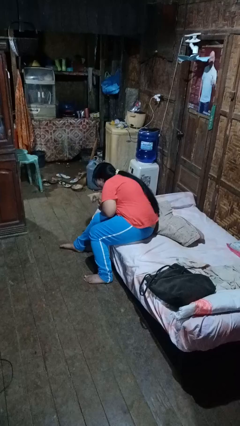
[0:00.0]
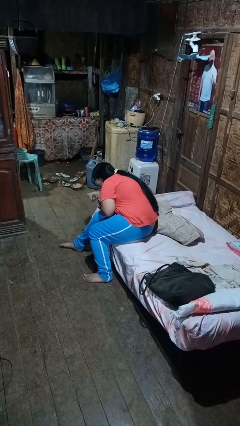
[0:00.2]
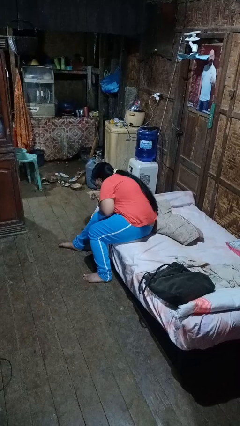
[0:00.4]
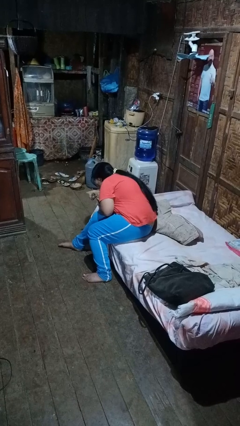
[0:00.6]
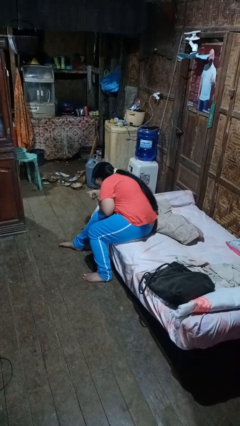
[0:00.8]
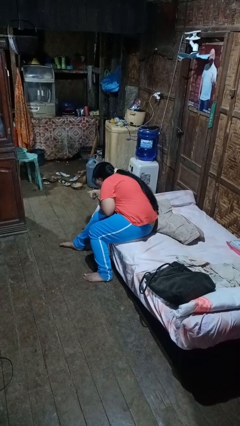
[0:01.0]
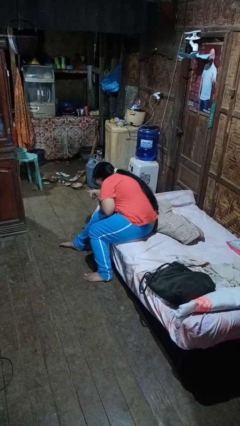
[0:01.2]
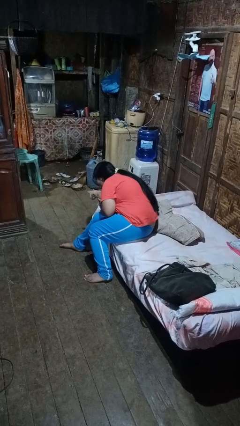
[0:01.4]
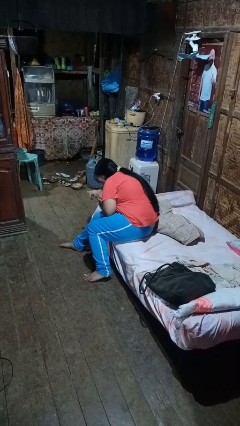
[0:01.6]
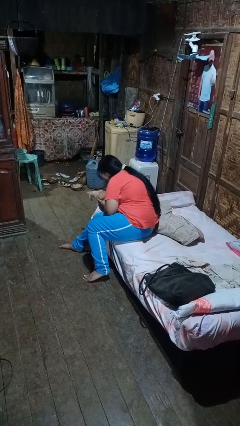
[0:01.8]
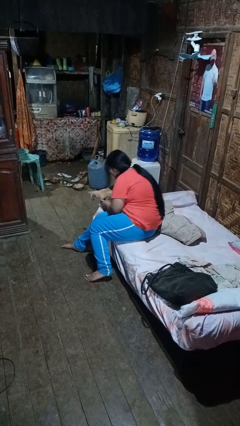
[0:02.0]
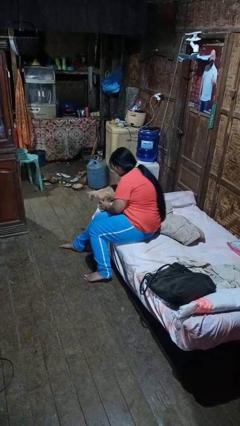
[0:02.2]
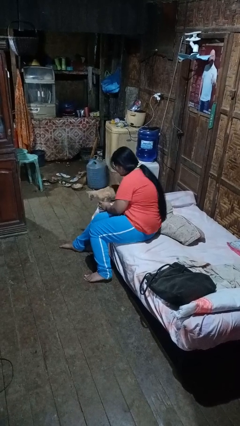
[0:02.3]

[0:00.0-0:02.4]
person hugs cat

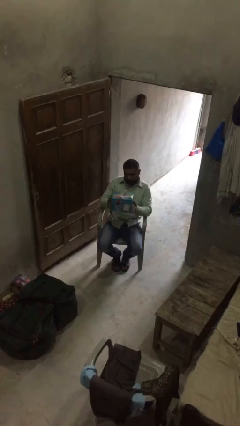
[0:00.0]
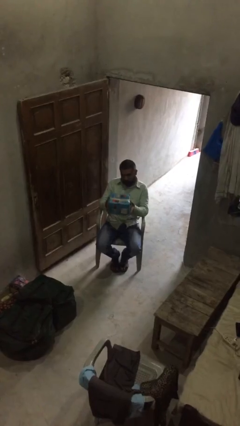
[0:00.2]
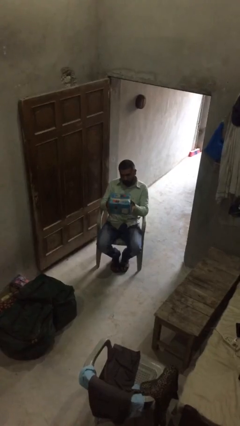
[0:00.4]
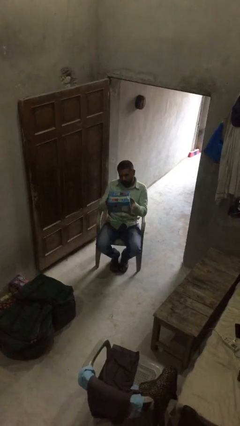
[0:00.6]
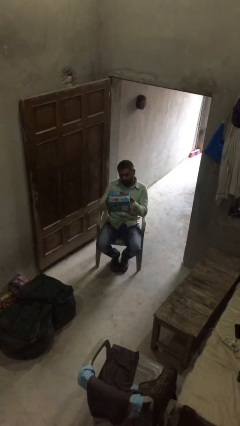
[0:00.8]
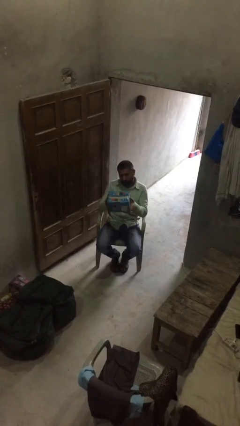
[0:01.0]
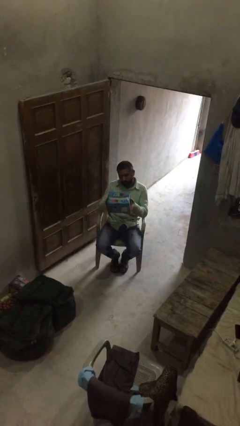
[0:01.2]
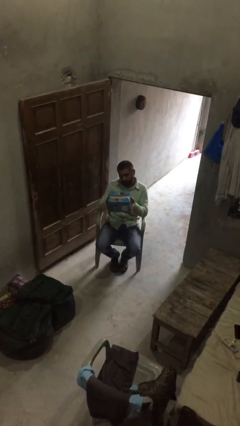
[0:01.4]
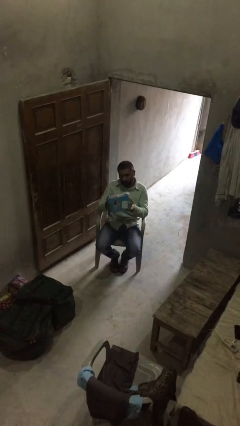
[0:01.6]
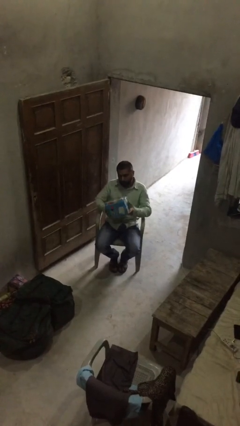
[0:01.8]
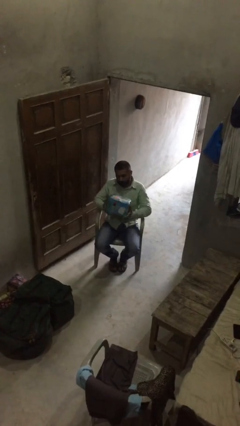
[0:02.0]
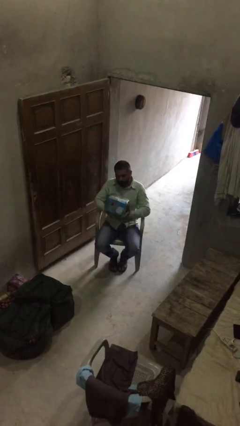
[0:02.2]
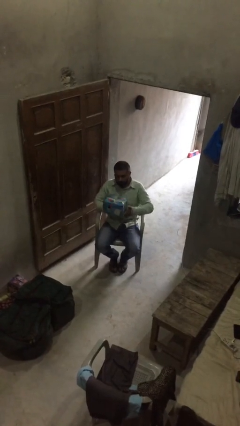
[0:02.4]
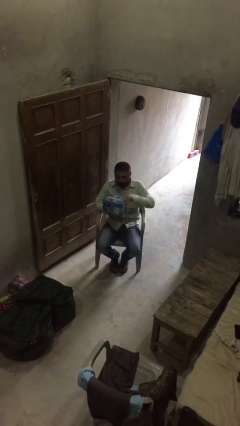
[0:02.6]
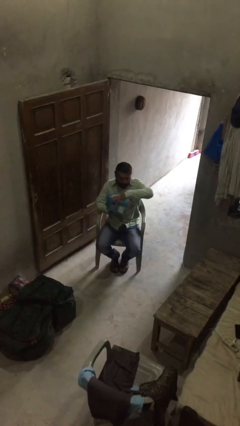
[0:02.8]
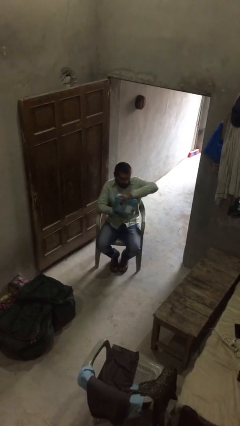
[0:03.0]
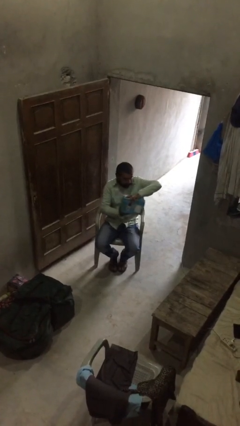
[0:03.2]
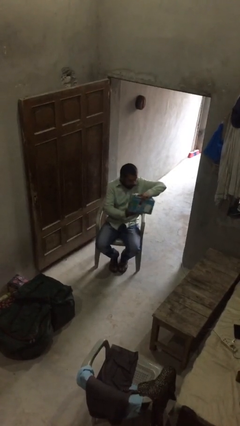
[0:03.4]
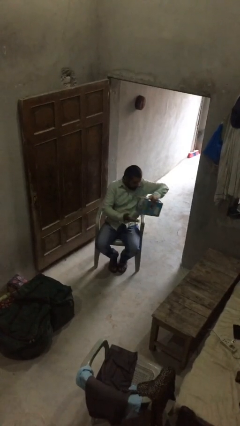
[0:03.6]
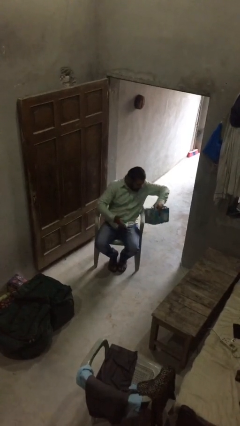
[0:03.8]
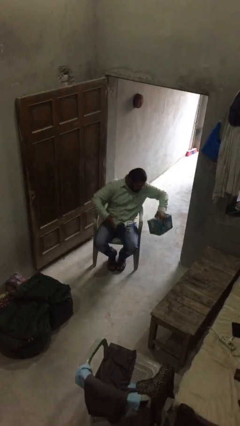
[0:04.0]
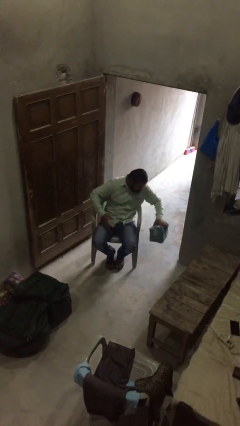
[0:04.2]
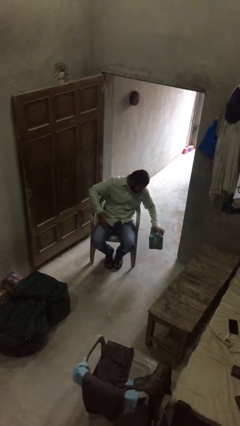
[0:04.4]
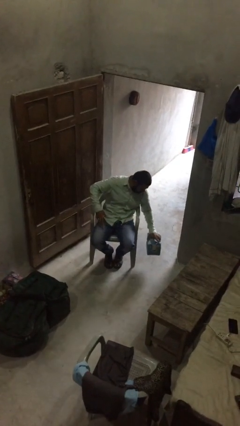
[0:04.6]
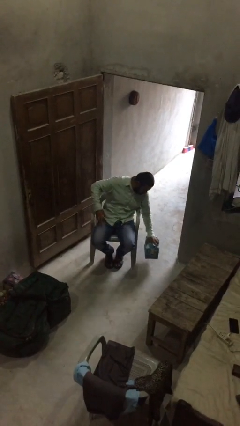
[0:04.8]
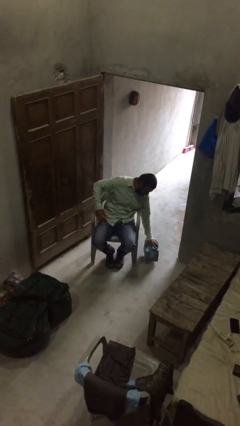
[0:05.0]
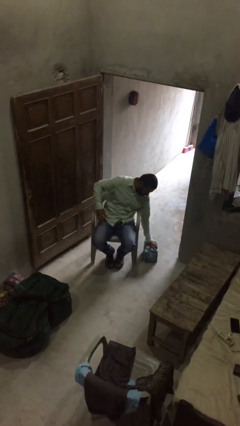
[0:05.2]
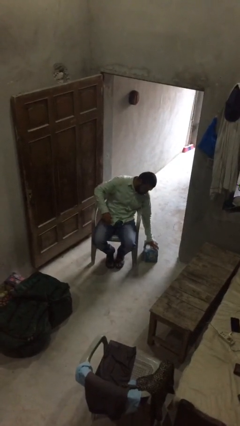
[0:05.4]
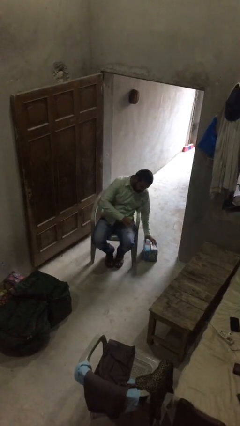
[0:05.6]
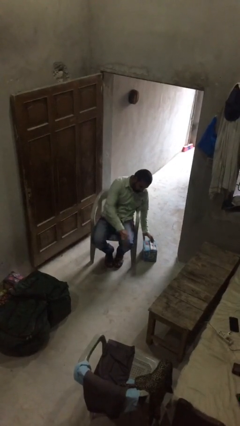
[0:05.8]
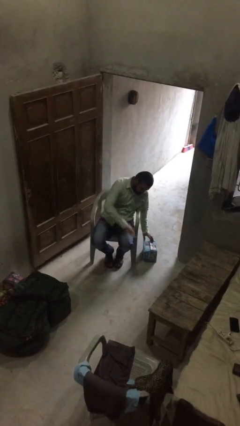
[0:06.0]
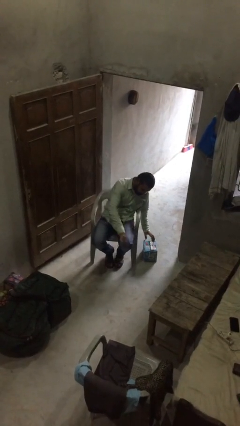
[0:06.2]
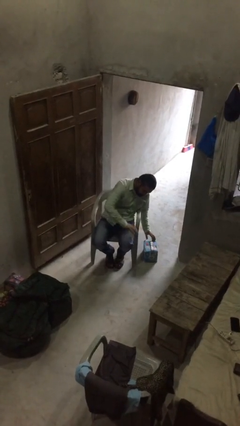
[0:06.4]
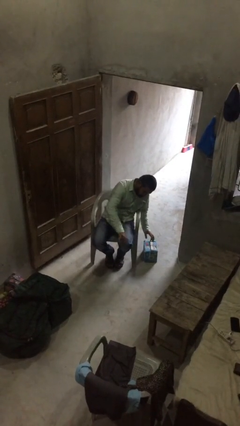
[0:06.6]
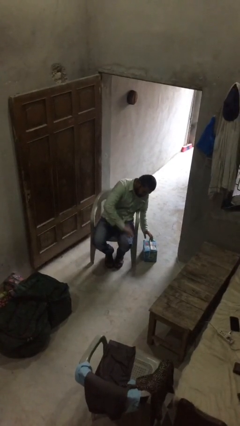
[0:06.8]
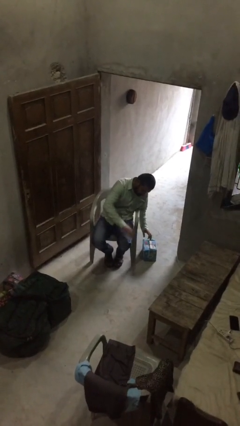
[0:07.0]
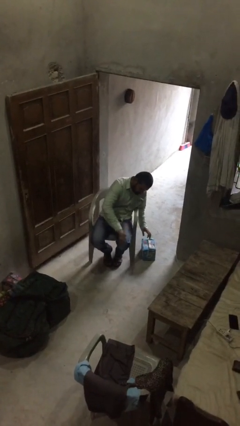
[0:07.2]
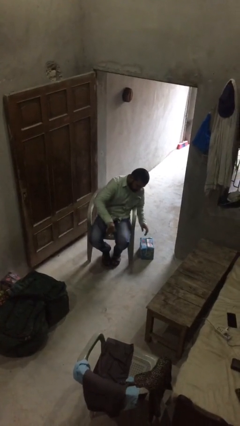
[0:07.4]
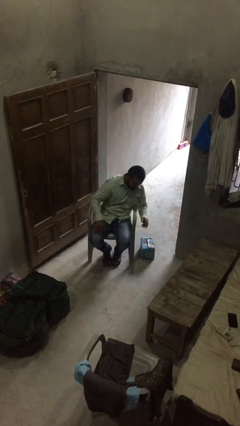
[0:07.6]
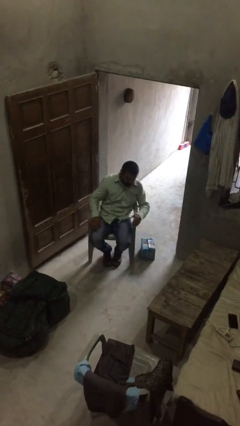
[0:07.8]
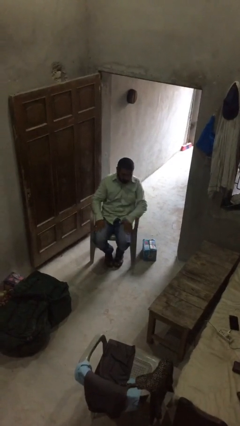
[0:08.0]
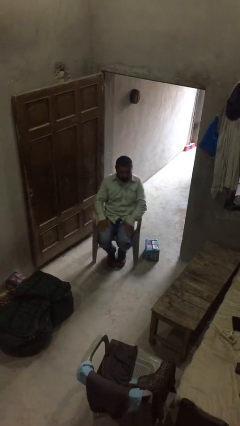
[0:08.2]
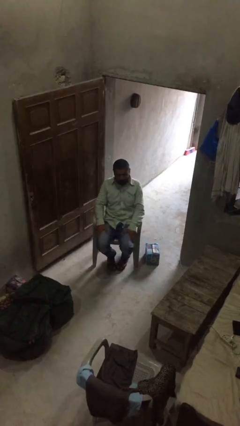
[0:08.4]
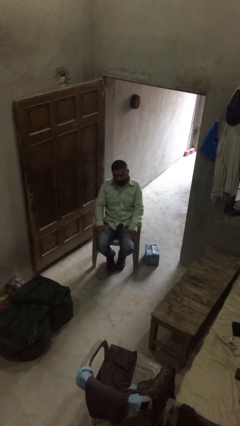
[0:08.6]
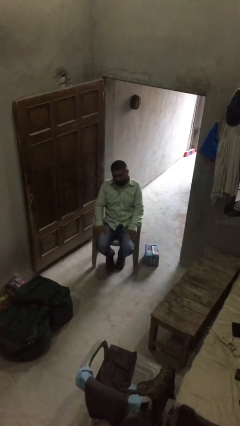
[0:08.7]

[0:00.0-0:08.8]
person puts down object on floor

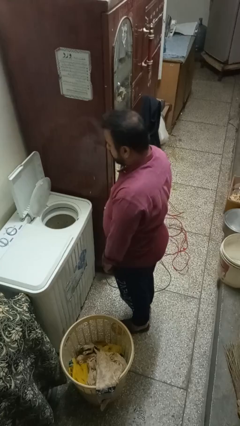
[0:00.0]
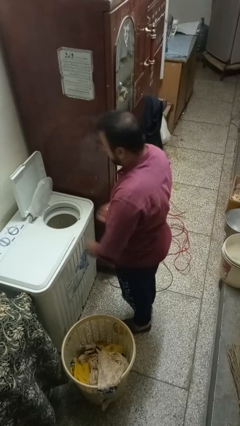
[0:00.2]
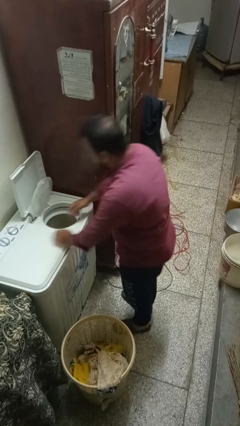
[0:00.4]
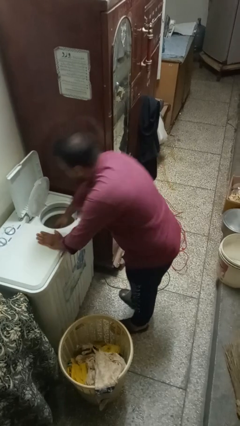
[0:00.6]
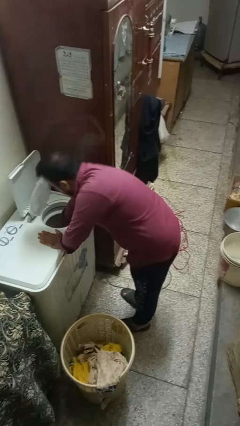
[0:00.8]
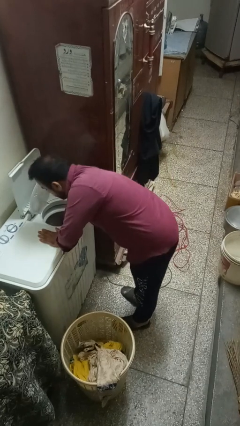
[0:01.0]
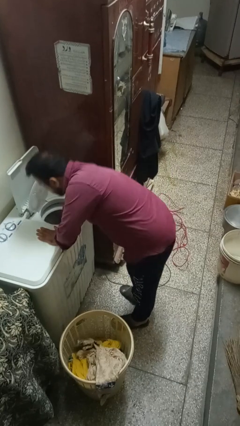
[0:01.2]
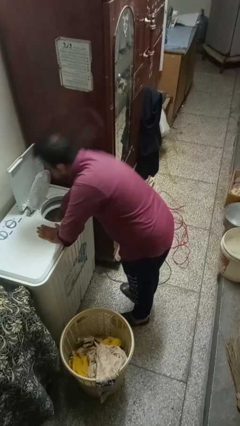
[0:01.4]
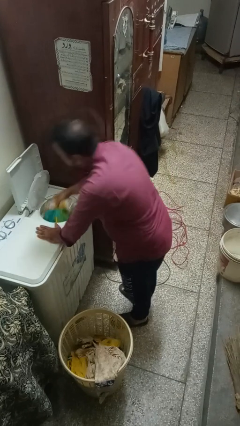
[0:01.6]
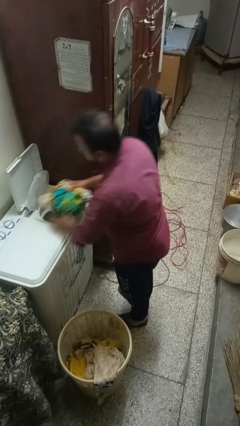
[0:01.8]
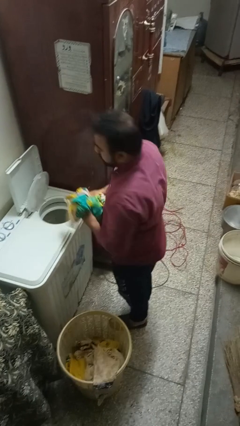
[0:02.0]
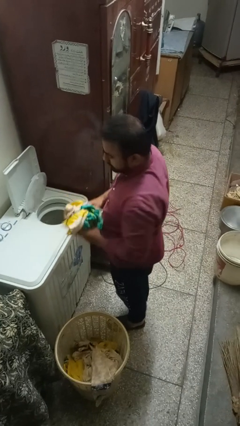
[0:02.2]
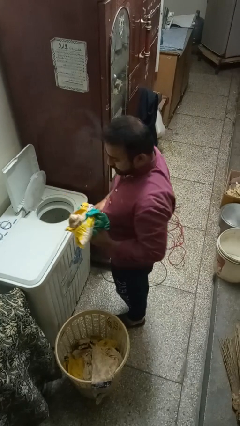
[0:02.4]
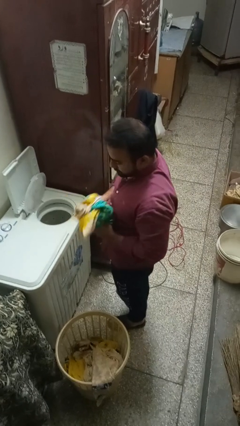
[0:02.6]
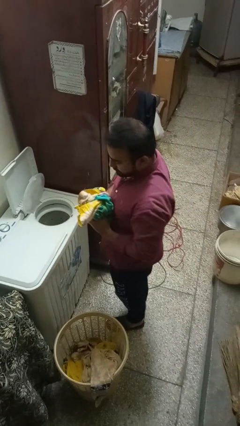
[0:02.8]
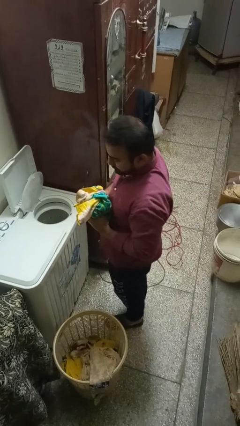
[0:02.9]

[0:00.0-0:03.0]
person unloads dryer

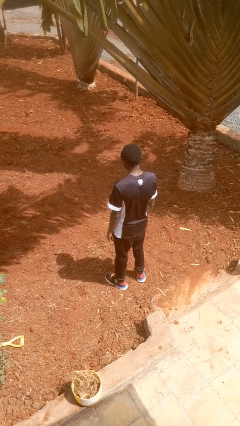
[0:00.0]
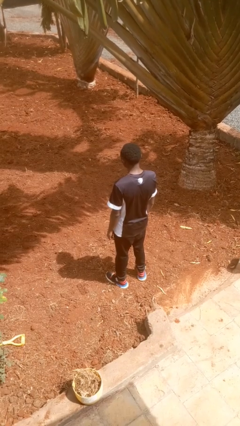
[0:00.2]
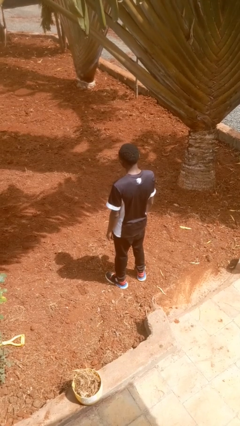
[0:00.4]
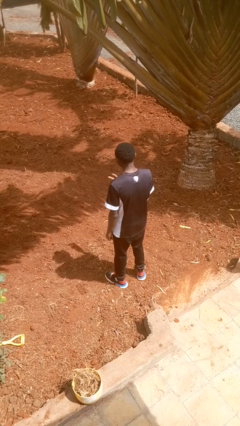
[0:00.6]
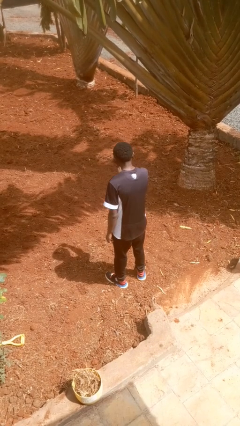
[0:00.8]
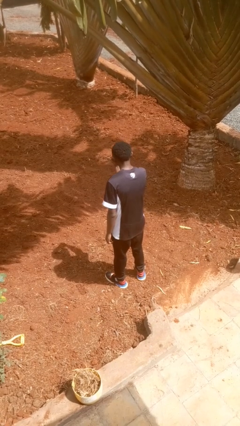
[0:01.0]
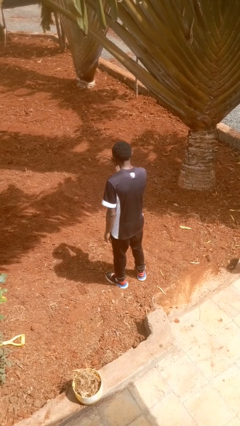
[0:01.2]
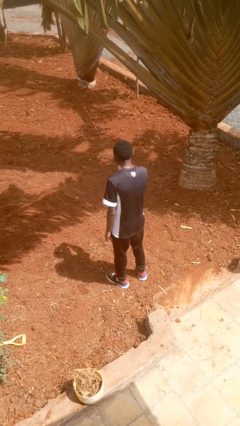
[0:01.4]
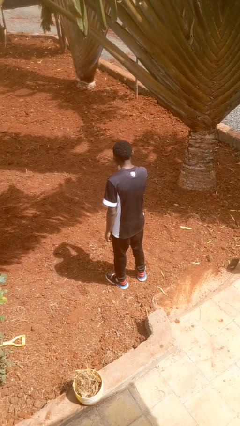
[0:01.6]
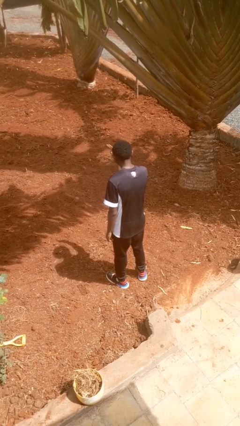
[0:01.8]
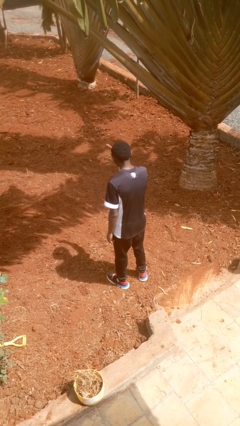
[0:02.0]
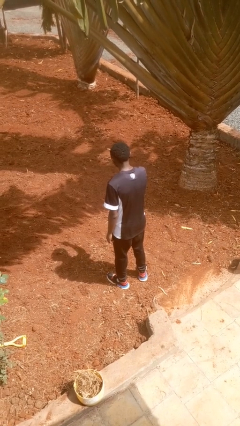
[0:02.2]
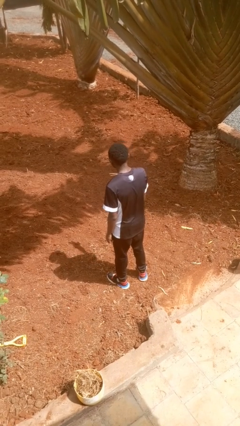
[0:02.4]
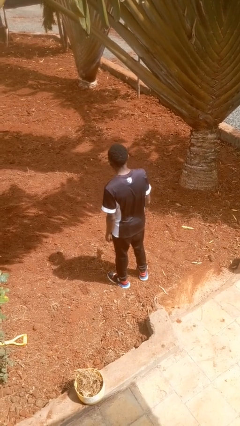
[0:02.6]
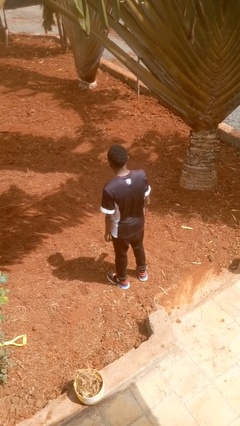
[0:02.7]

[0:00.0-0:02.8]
person gestures watch closely

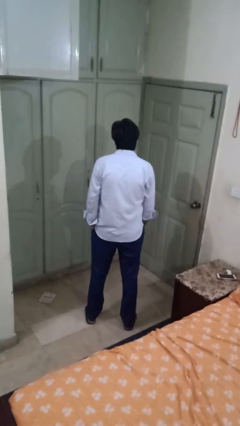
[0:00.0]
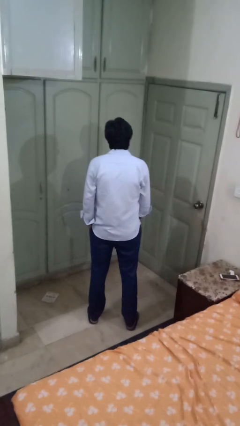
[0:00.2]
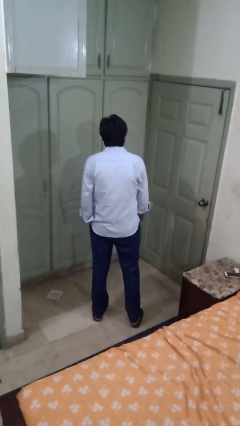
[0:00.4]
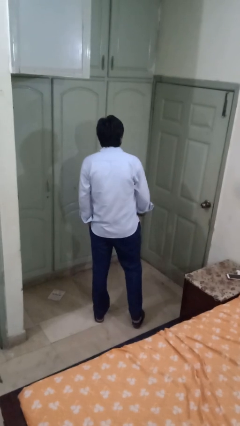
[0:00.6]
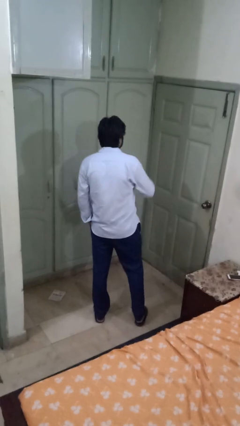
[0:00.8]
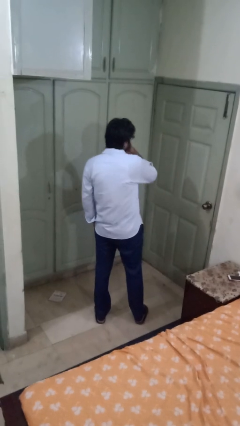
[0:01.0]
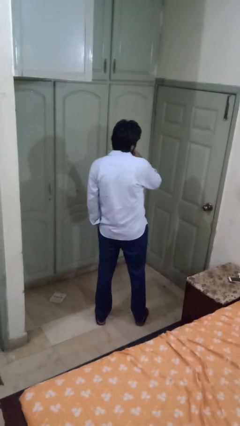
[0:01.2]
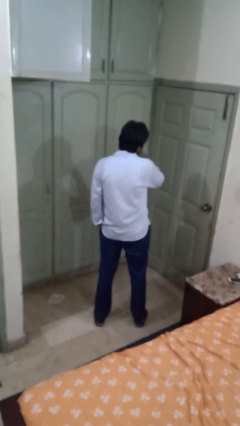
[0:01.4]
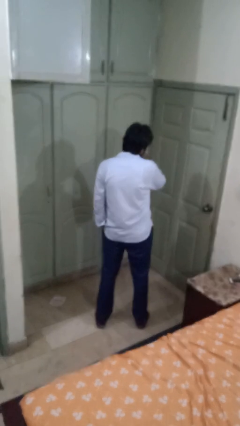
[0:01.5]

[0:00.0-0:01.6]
person strokes chin
